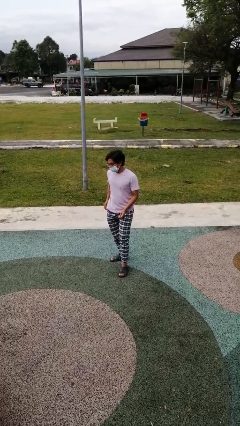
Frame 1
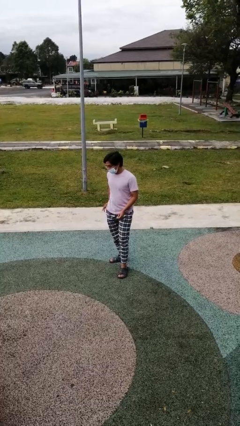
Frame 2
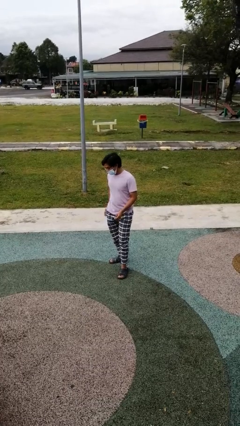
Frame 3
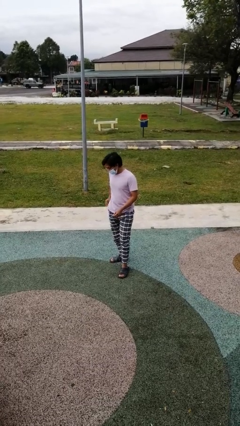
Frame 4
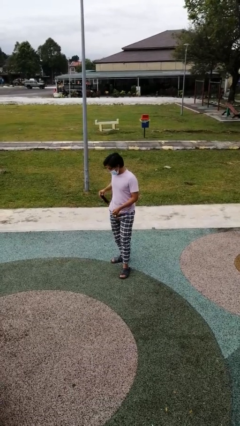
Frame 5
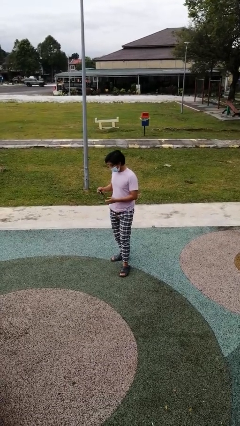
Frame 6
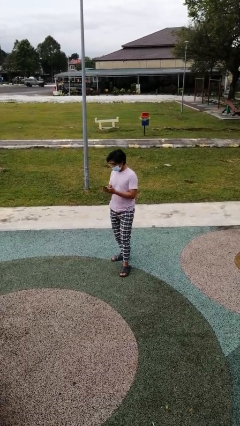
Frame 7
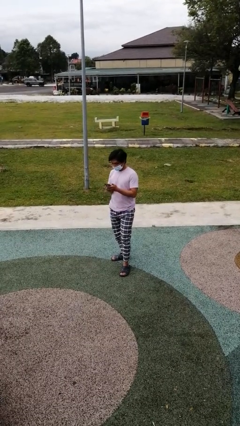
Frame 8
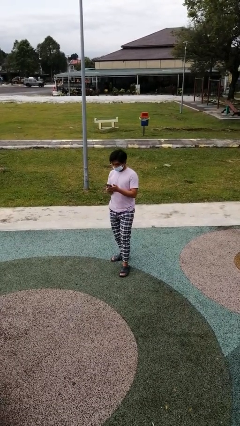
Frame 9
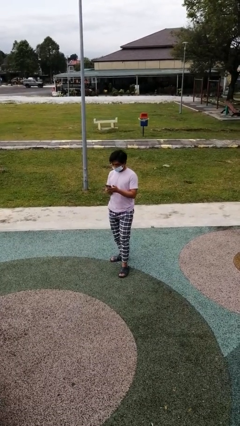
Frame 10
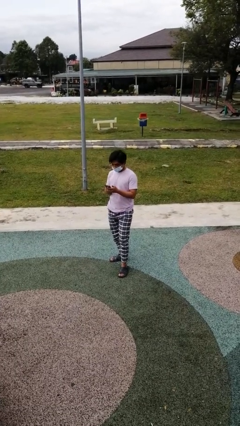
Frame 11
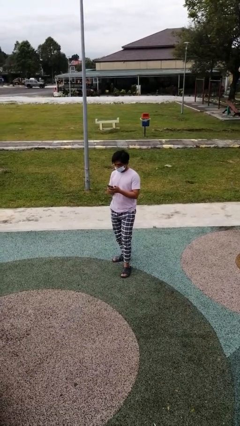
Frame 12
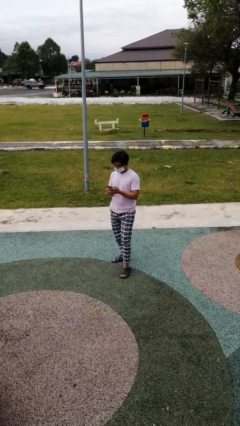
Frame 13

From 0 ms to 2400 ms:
person takes phone from pocket

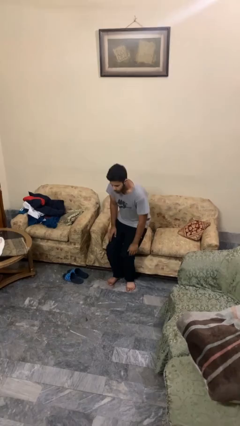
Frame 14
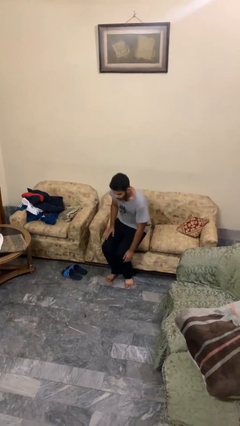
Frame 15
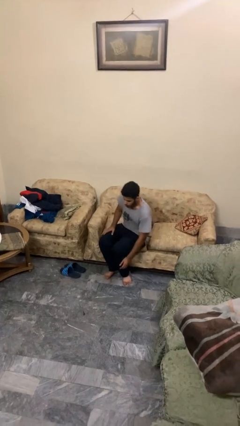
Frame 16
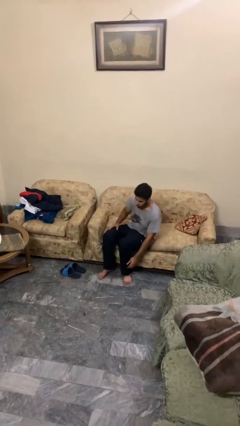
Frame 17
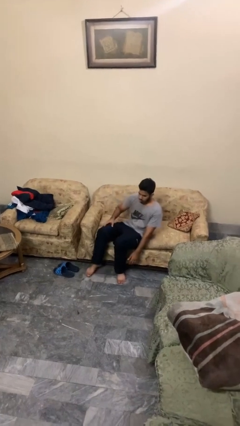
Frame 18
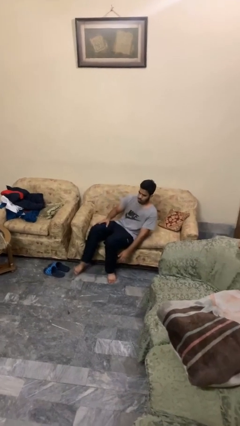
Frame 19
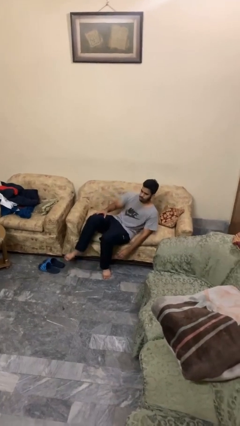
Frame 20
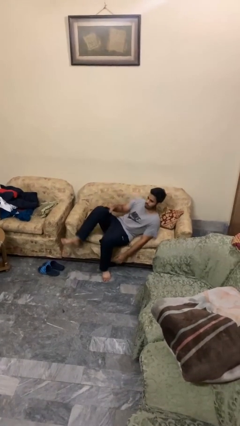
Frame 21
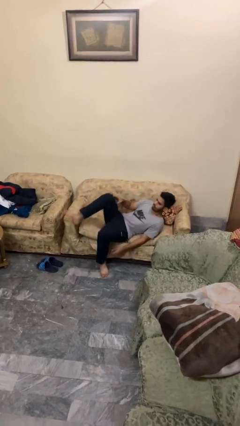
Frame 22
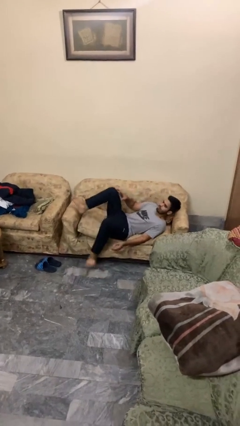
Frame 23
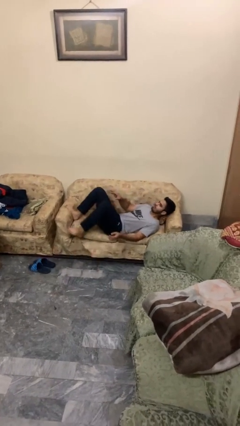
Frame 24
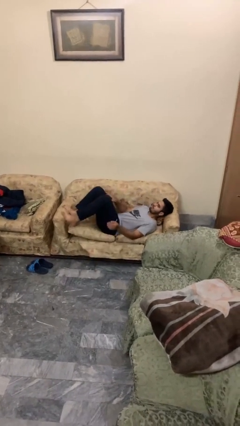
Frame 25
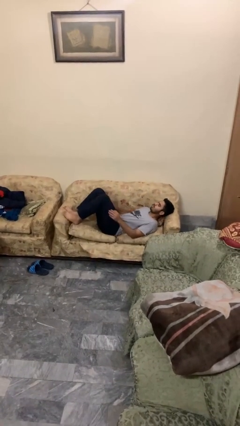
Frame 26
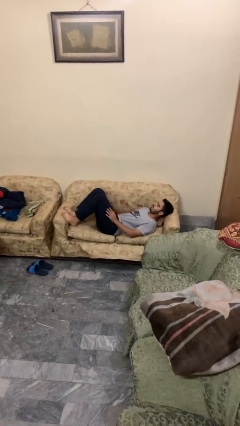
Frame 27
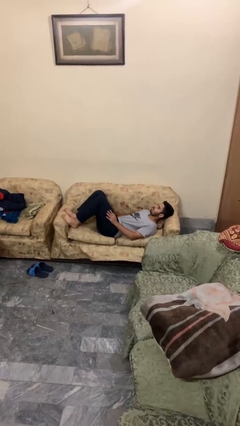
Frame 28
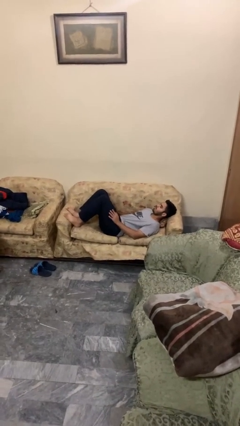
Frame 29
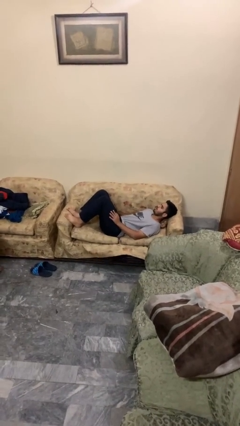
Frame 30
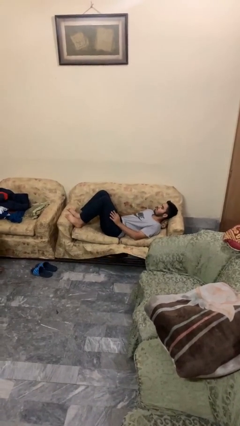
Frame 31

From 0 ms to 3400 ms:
person lies down on couch

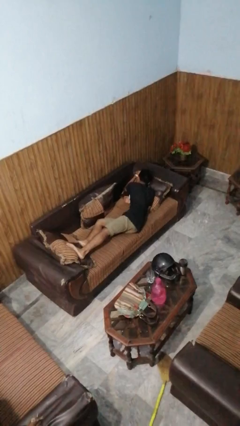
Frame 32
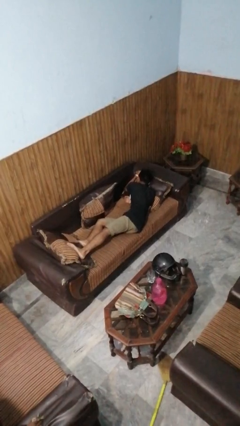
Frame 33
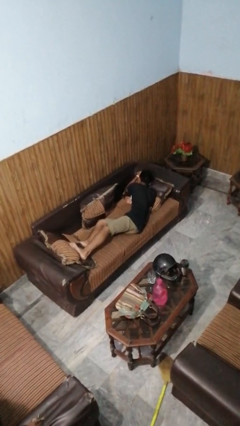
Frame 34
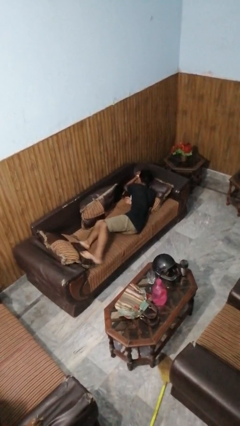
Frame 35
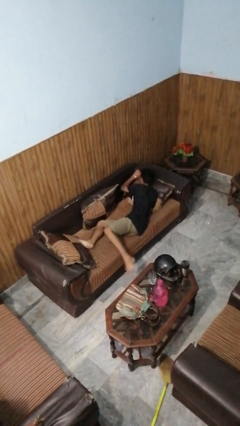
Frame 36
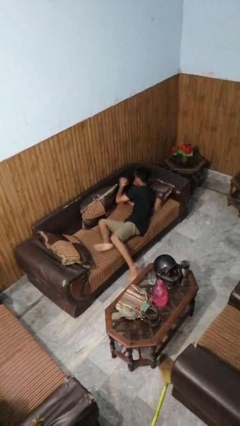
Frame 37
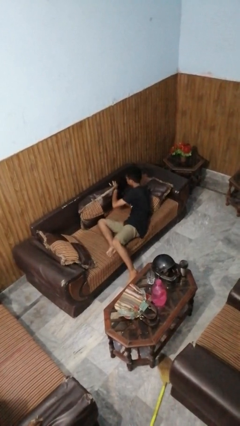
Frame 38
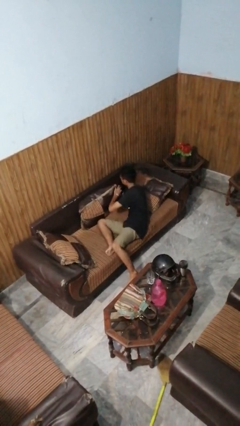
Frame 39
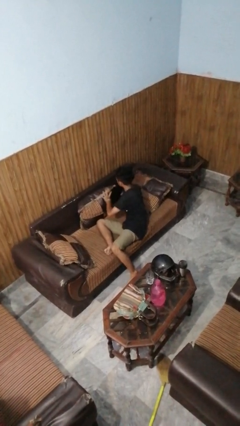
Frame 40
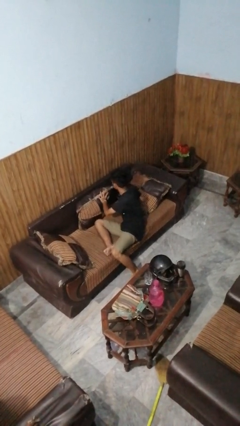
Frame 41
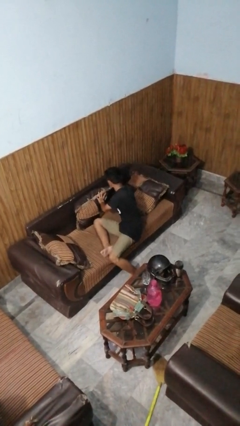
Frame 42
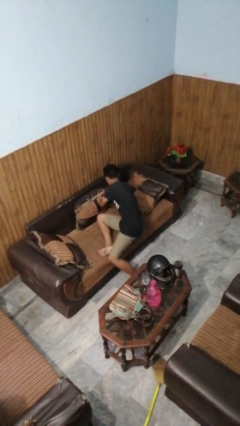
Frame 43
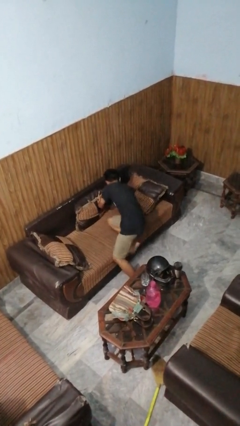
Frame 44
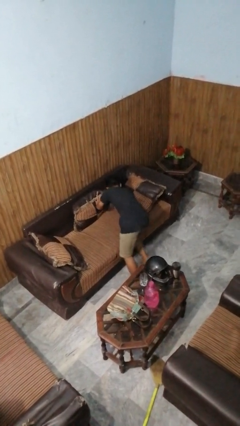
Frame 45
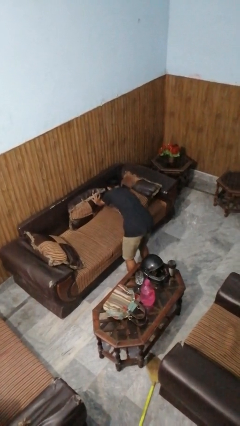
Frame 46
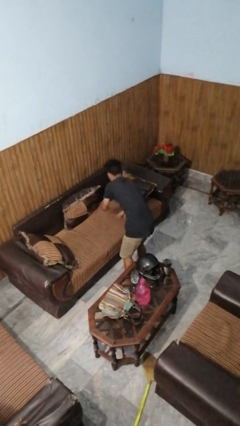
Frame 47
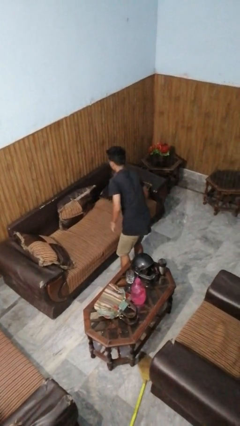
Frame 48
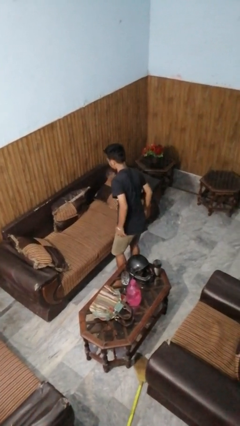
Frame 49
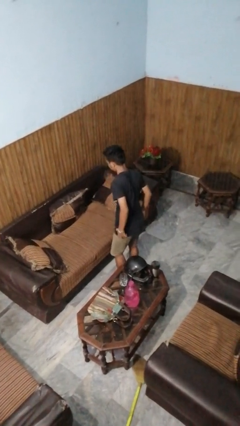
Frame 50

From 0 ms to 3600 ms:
person stands up

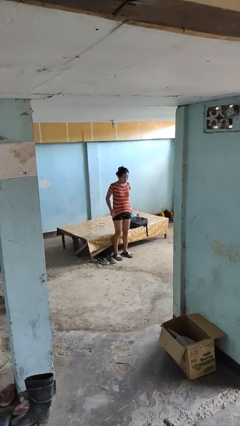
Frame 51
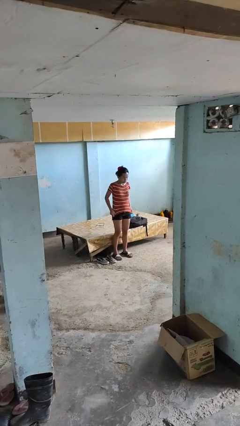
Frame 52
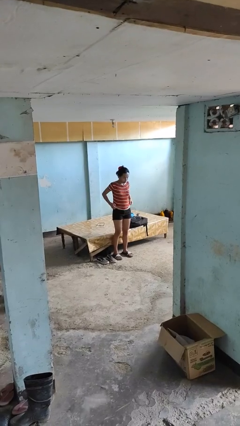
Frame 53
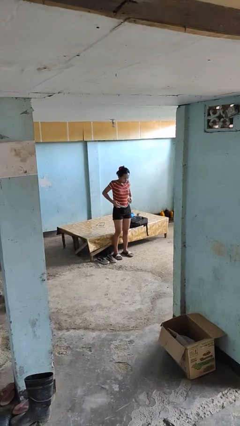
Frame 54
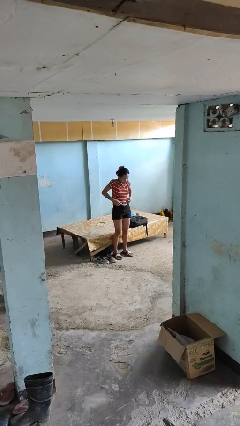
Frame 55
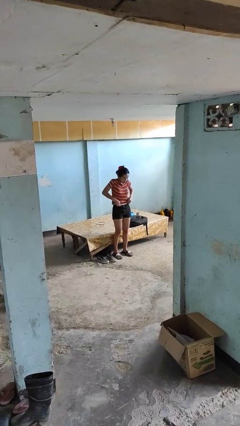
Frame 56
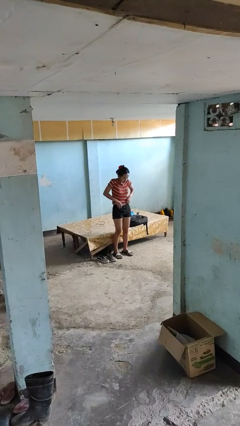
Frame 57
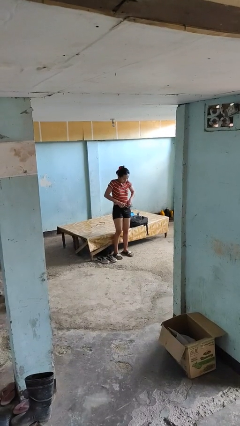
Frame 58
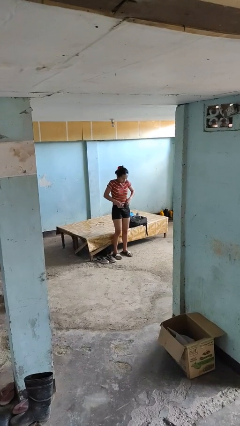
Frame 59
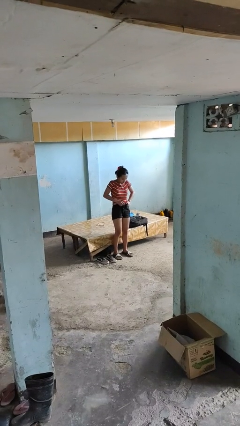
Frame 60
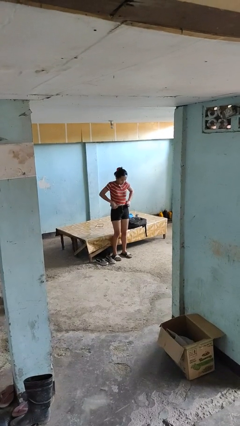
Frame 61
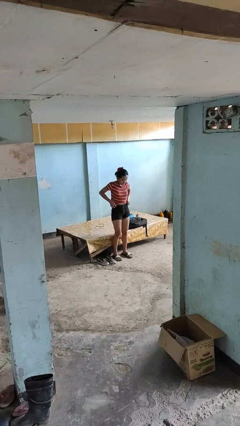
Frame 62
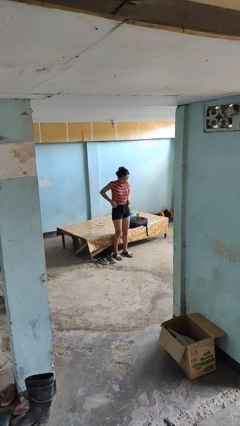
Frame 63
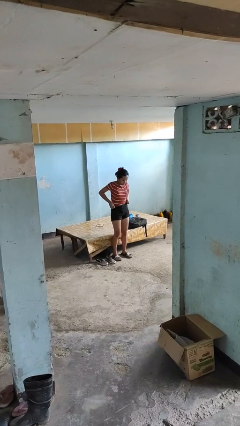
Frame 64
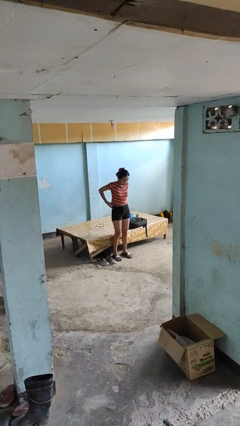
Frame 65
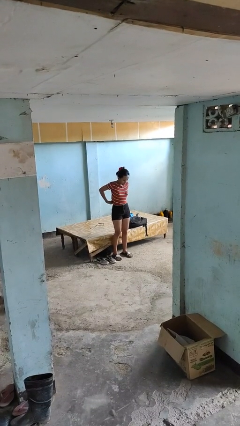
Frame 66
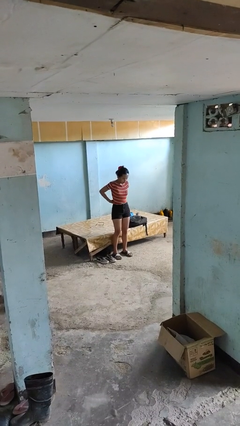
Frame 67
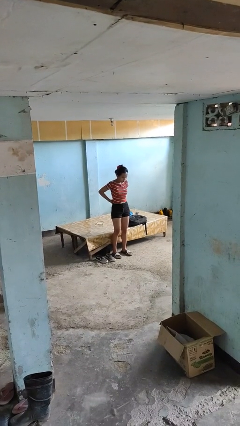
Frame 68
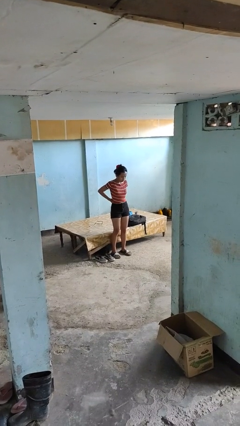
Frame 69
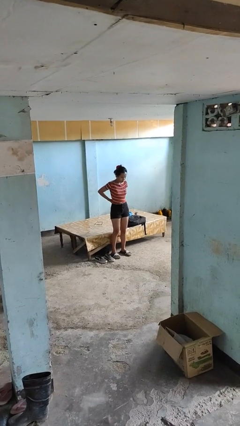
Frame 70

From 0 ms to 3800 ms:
person tucks in shirt

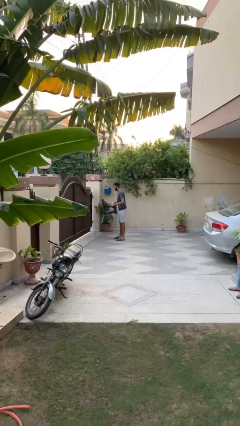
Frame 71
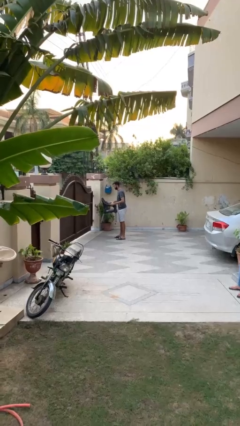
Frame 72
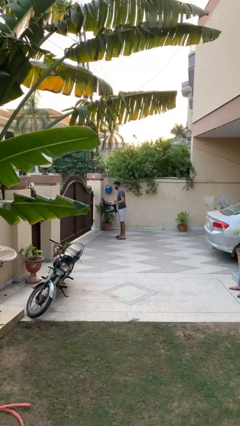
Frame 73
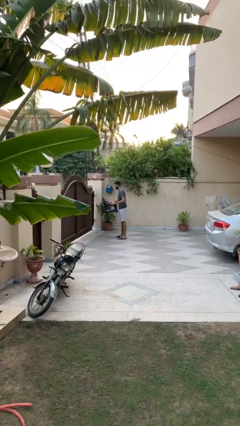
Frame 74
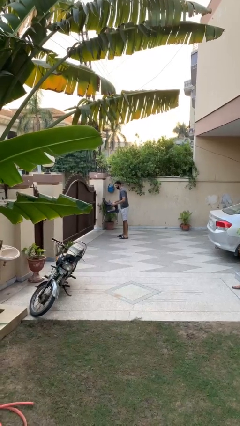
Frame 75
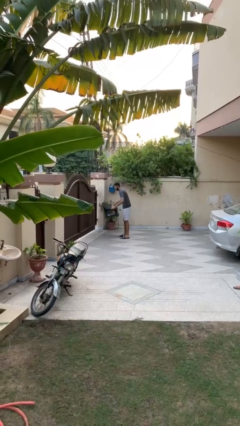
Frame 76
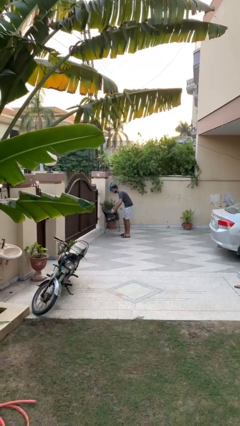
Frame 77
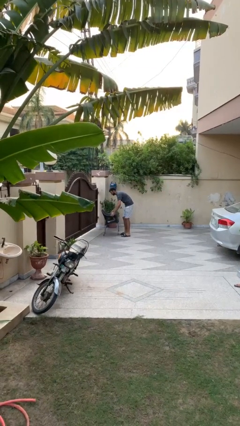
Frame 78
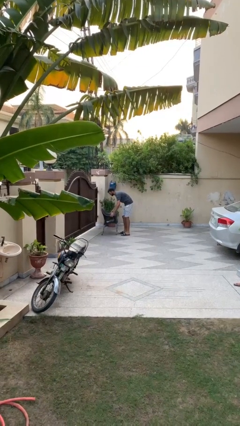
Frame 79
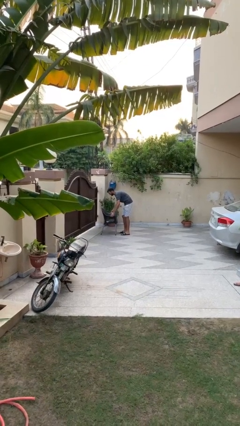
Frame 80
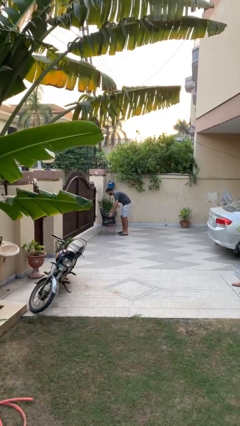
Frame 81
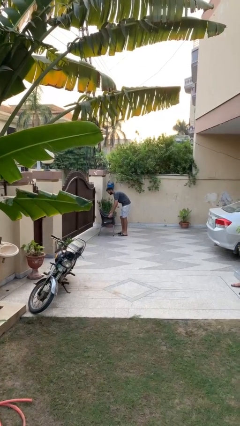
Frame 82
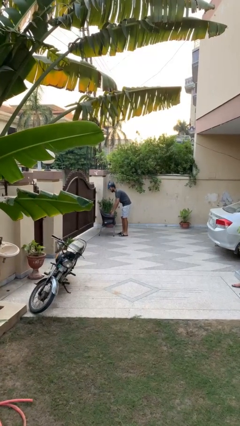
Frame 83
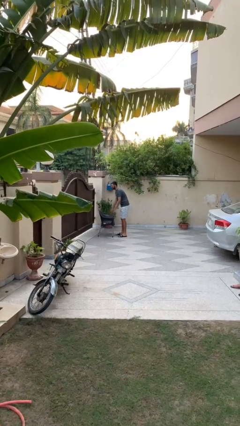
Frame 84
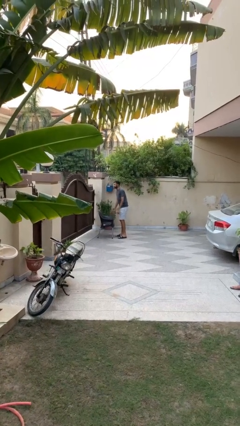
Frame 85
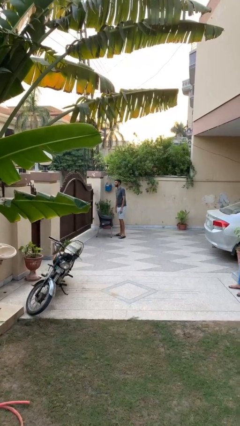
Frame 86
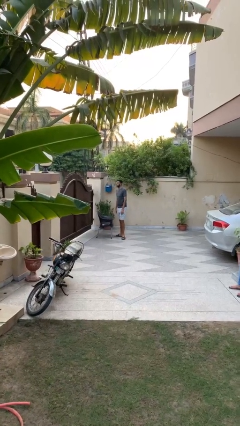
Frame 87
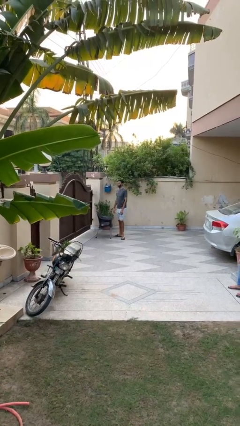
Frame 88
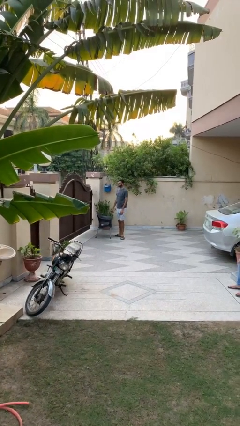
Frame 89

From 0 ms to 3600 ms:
person puts down object on floor

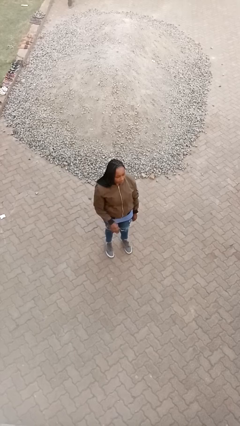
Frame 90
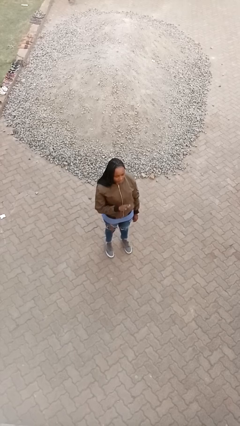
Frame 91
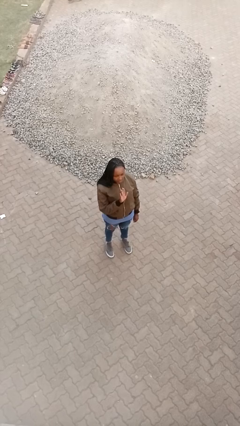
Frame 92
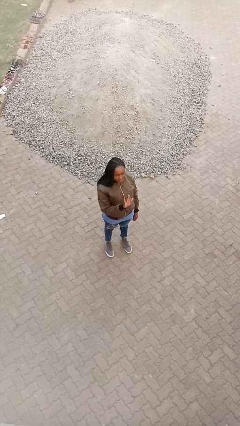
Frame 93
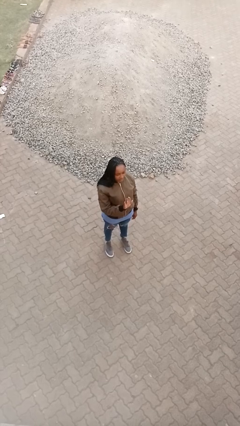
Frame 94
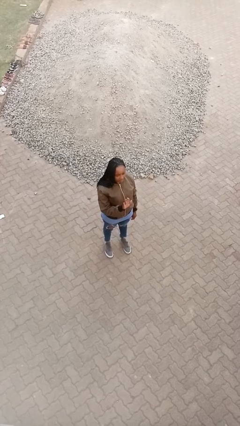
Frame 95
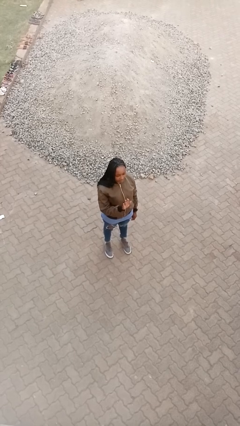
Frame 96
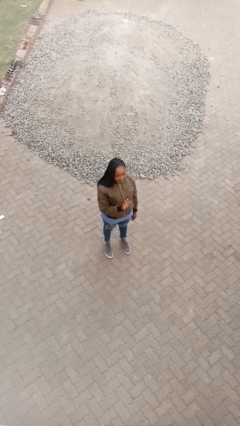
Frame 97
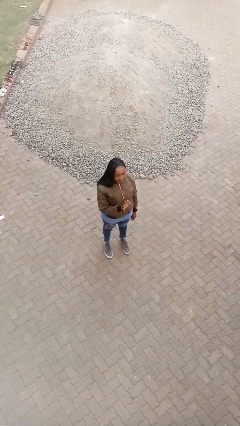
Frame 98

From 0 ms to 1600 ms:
person gestures stop
